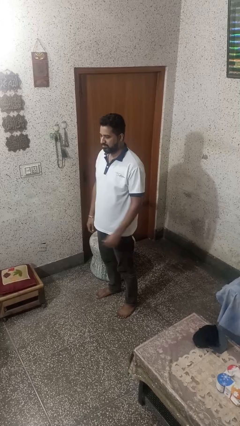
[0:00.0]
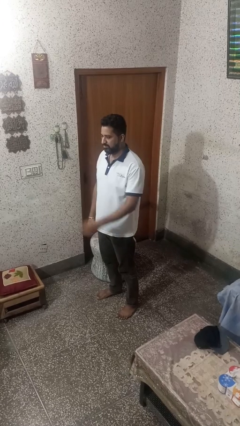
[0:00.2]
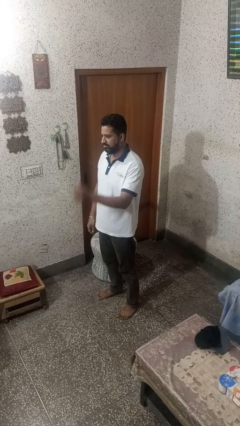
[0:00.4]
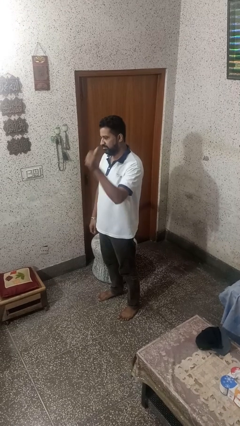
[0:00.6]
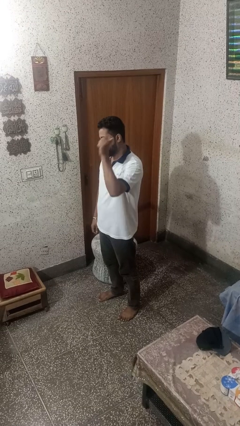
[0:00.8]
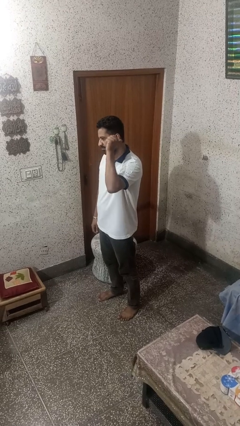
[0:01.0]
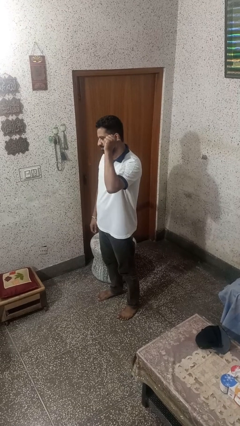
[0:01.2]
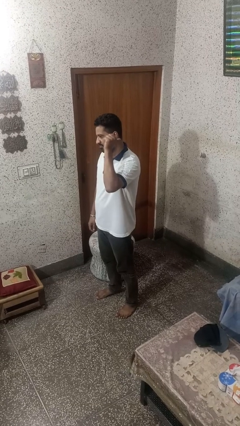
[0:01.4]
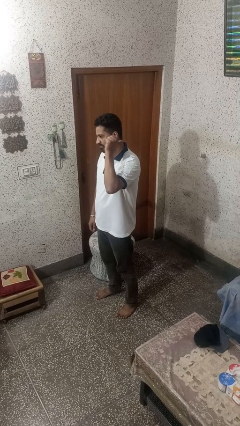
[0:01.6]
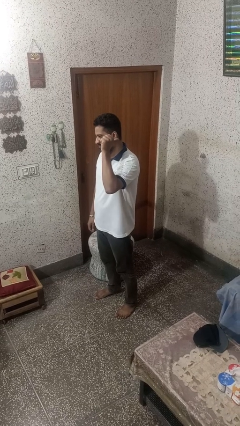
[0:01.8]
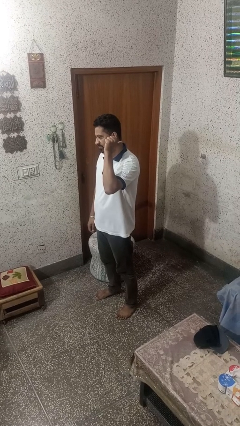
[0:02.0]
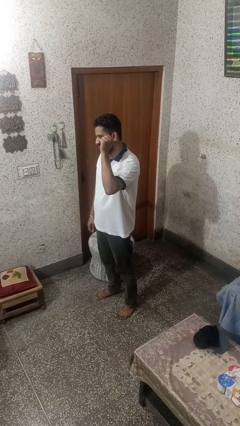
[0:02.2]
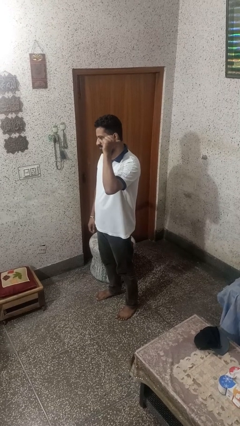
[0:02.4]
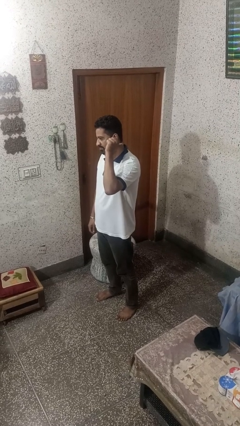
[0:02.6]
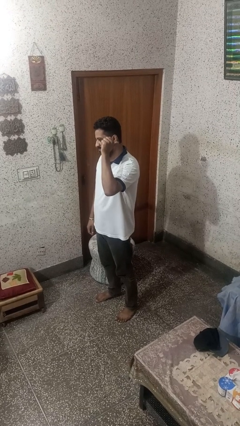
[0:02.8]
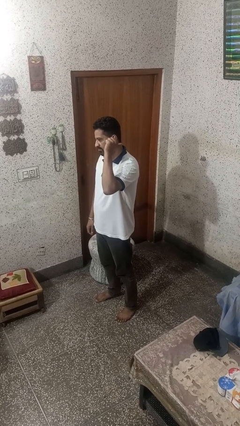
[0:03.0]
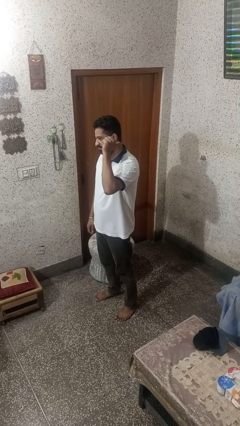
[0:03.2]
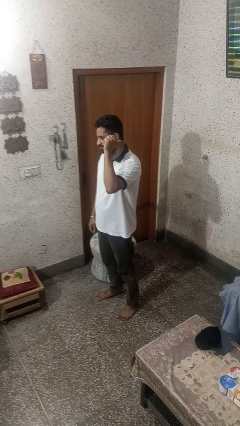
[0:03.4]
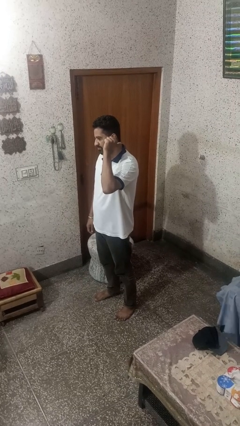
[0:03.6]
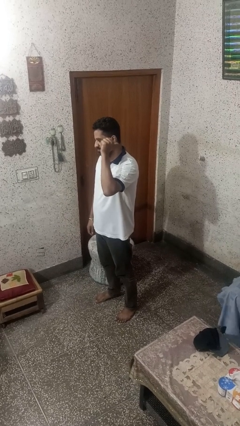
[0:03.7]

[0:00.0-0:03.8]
person gestures behind me

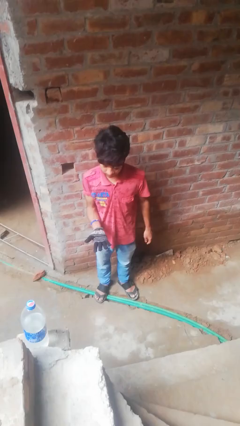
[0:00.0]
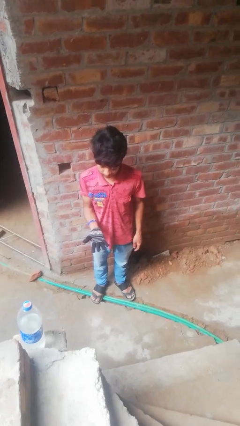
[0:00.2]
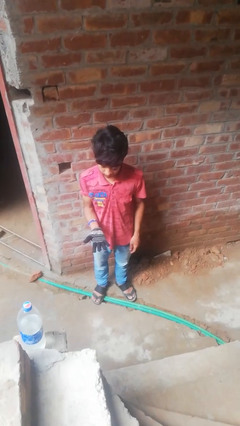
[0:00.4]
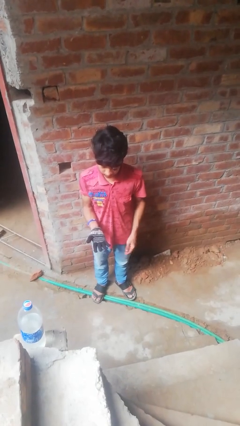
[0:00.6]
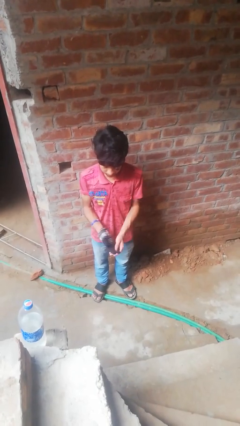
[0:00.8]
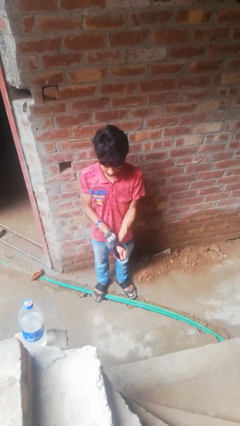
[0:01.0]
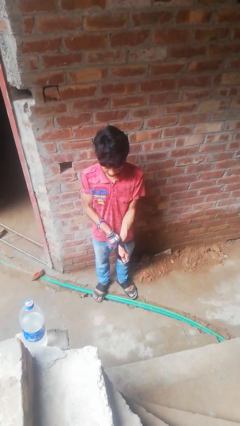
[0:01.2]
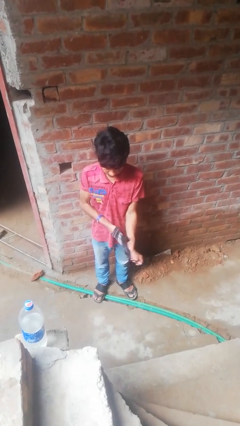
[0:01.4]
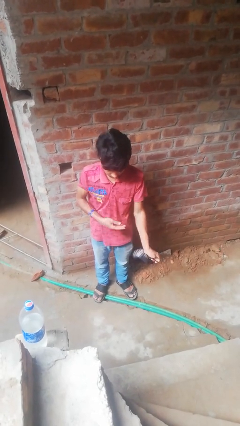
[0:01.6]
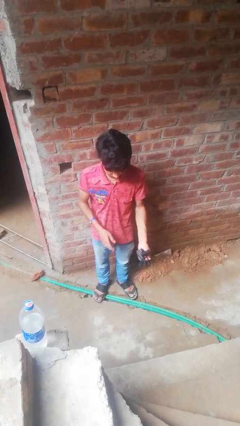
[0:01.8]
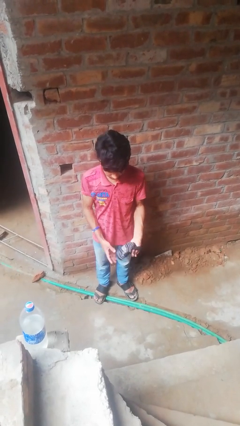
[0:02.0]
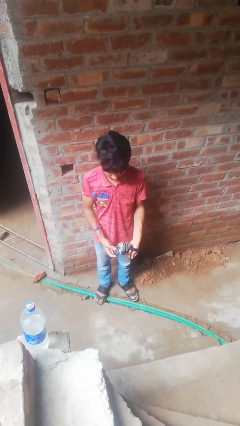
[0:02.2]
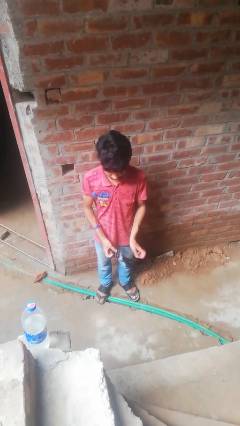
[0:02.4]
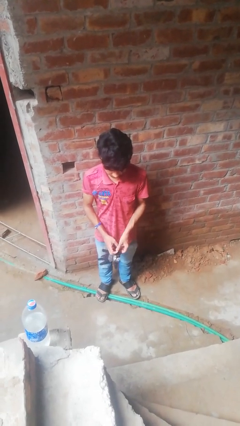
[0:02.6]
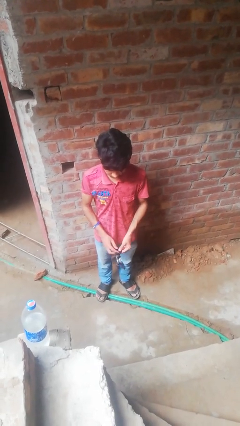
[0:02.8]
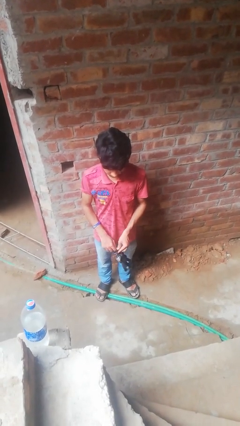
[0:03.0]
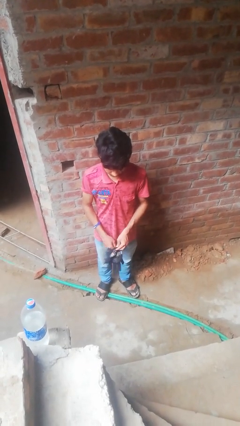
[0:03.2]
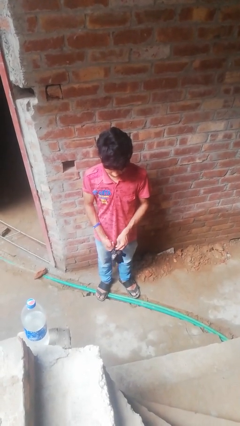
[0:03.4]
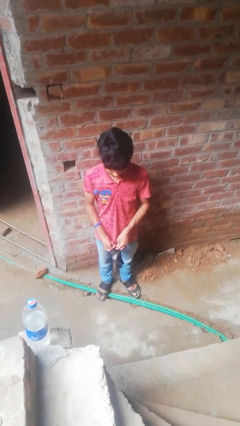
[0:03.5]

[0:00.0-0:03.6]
person takes off gloves

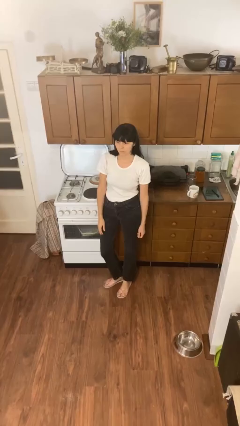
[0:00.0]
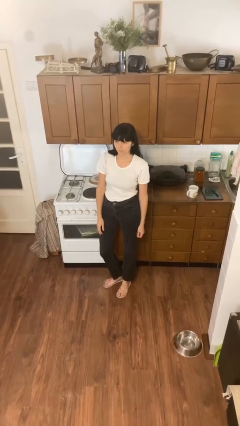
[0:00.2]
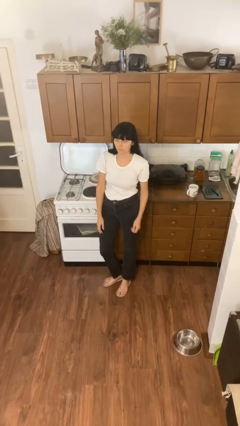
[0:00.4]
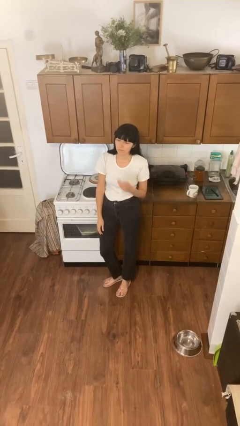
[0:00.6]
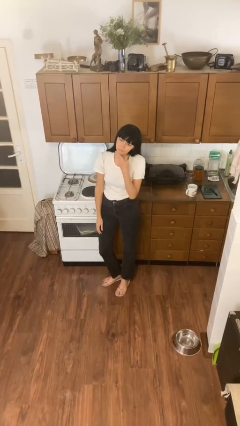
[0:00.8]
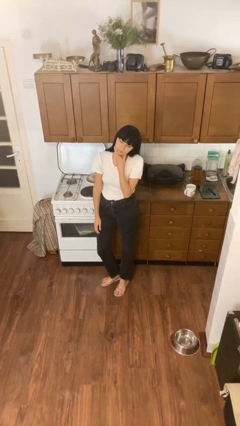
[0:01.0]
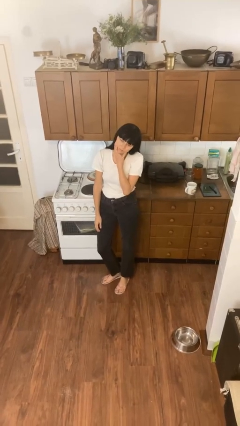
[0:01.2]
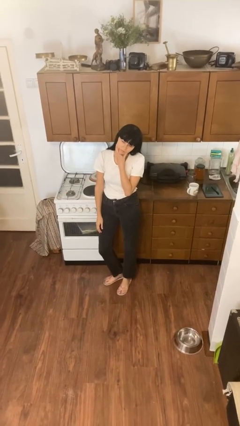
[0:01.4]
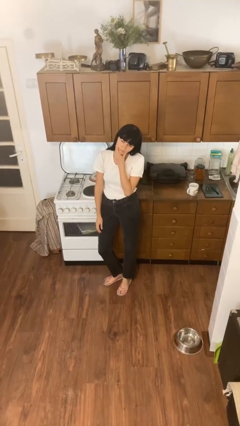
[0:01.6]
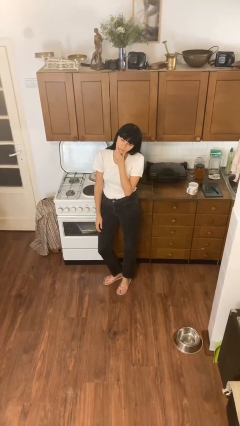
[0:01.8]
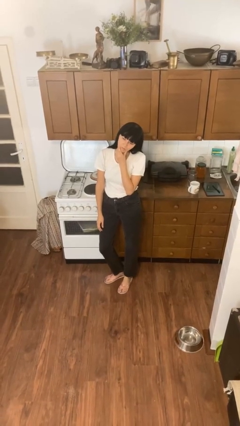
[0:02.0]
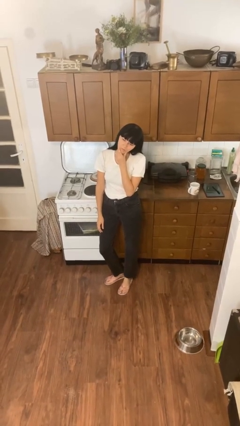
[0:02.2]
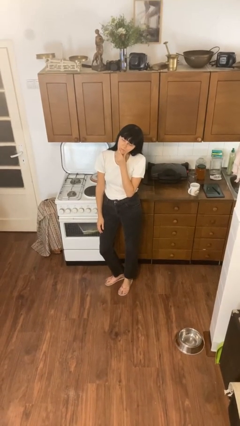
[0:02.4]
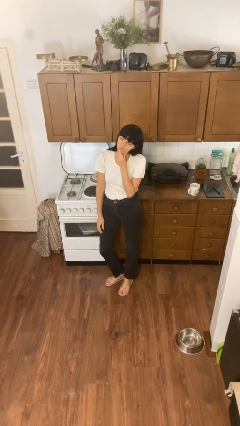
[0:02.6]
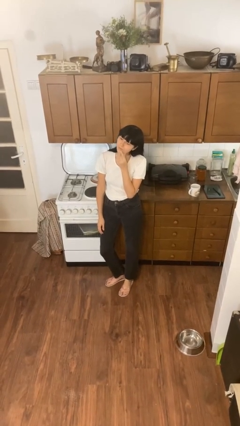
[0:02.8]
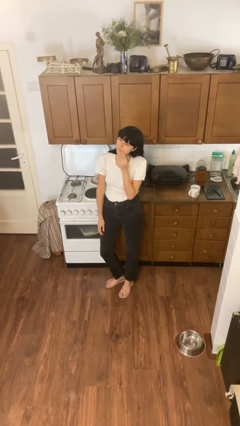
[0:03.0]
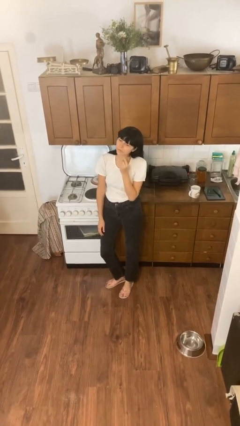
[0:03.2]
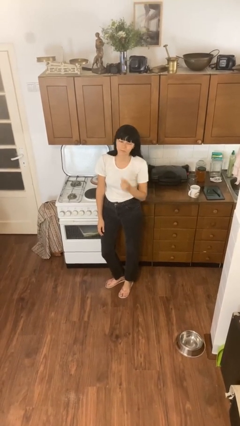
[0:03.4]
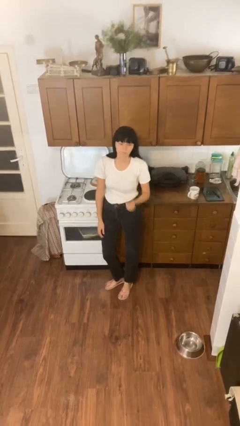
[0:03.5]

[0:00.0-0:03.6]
person strokes chin

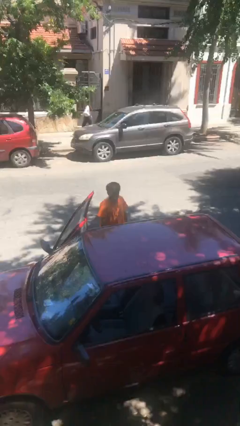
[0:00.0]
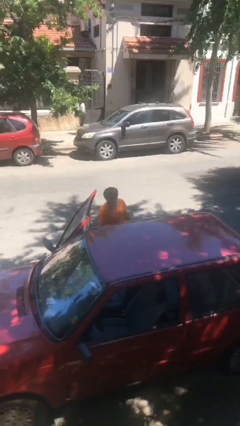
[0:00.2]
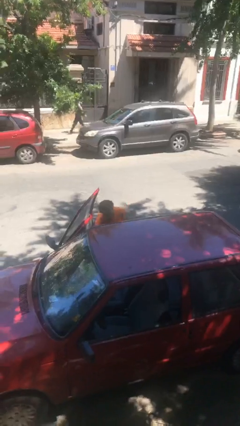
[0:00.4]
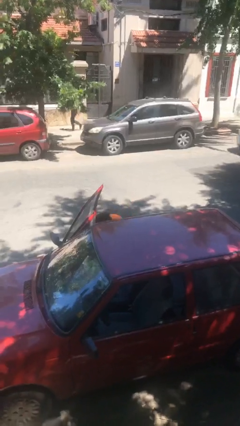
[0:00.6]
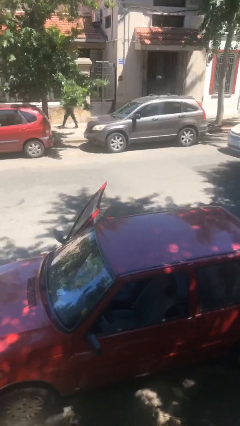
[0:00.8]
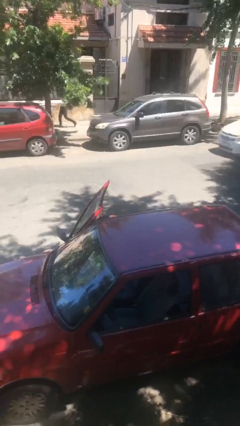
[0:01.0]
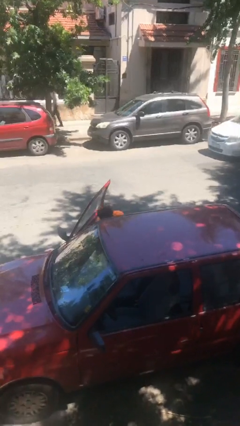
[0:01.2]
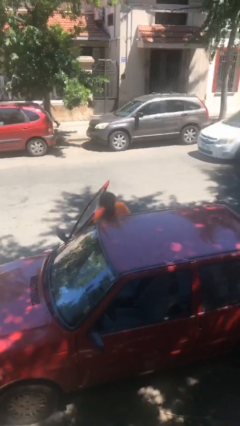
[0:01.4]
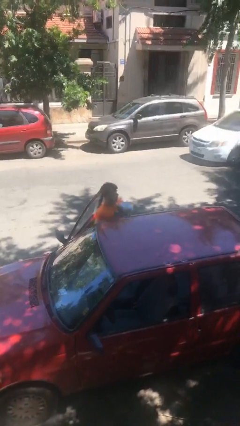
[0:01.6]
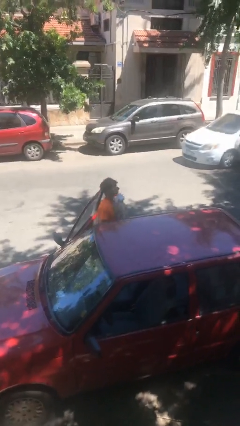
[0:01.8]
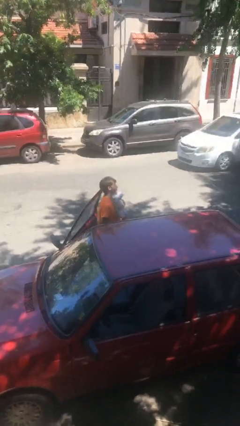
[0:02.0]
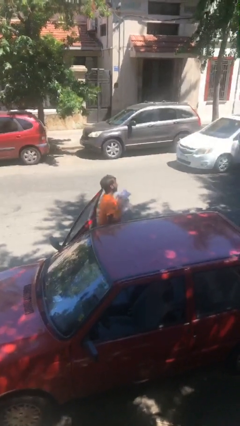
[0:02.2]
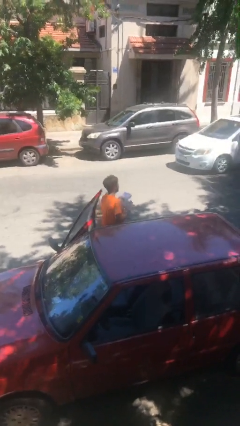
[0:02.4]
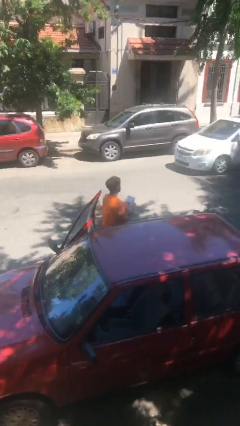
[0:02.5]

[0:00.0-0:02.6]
person unloads car

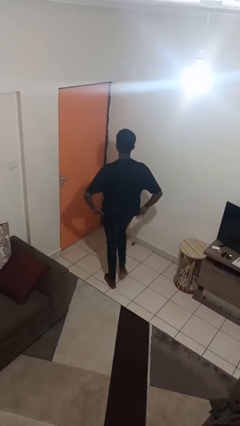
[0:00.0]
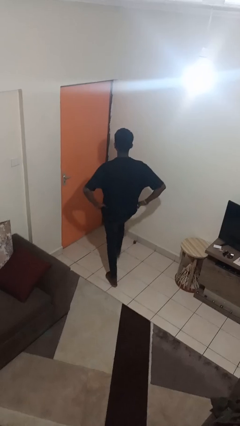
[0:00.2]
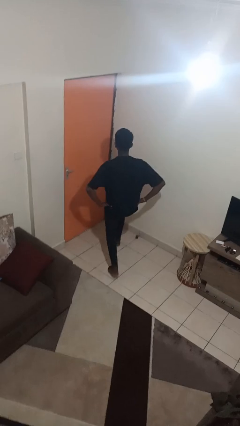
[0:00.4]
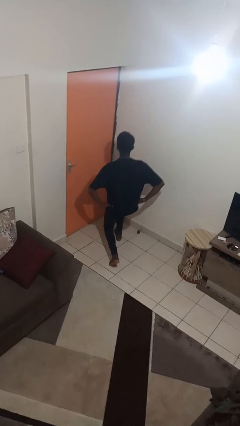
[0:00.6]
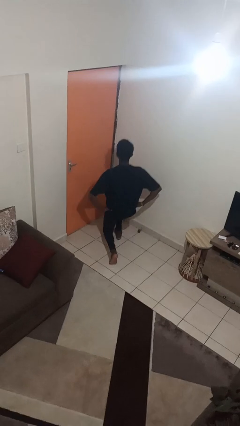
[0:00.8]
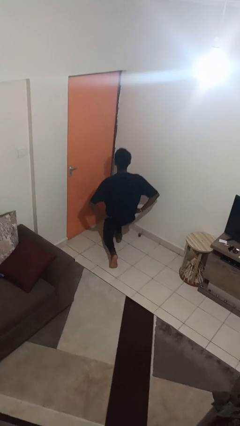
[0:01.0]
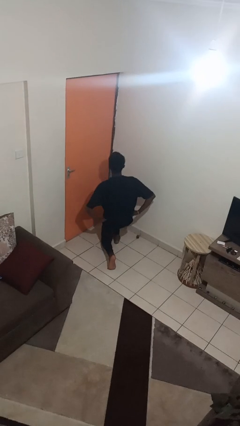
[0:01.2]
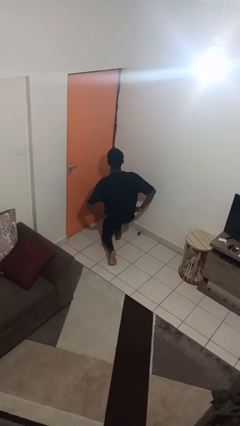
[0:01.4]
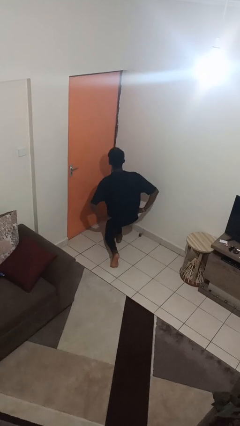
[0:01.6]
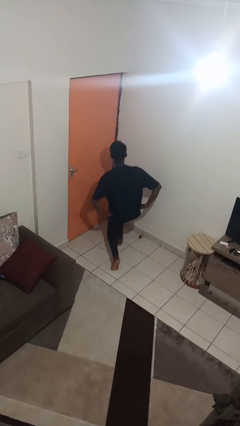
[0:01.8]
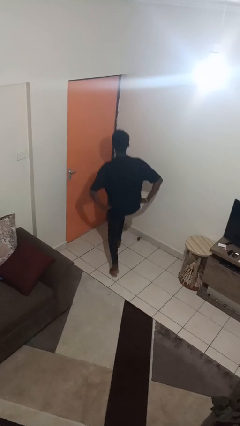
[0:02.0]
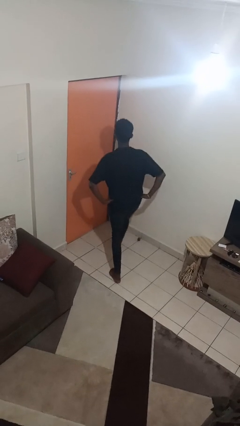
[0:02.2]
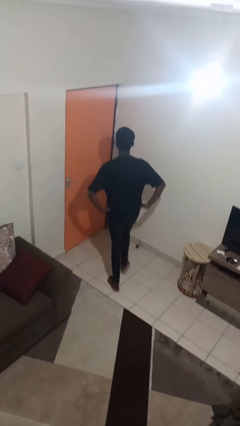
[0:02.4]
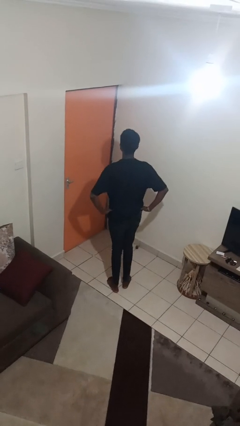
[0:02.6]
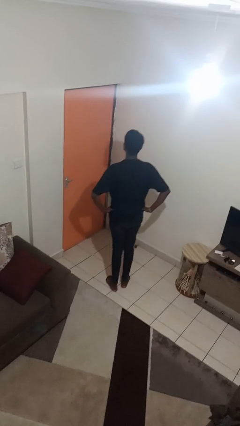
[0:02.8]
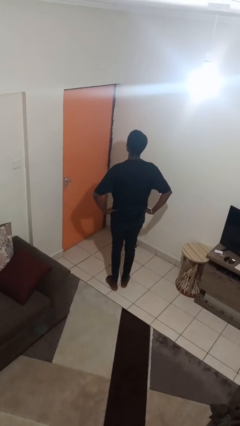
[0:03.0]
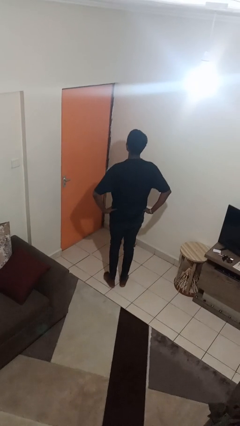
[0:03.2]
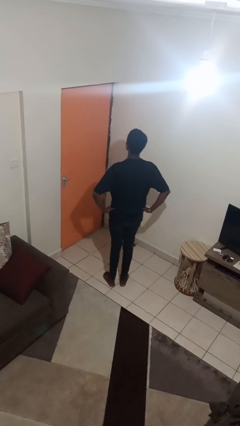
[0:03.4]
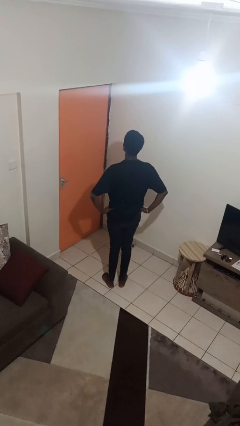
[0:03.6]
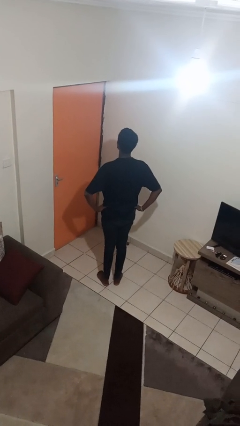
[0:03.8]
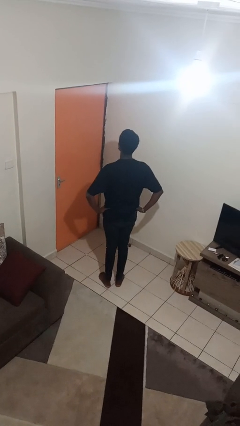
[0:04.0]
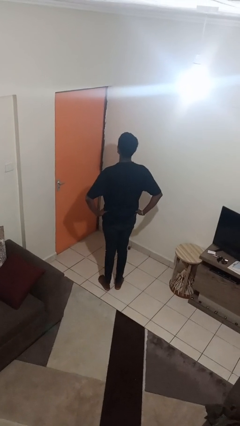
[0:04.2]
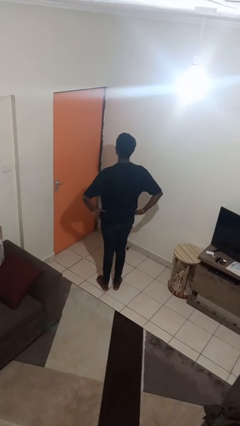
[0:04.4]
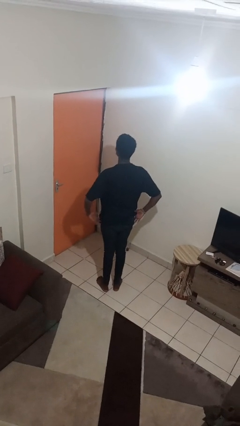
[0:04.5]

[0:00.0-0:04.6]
person exercises with lunges
